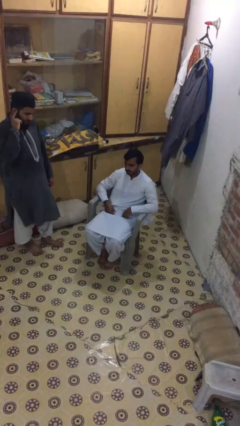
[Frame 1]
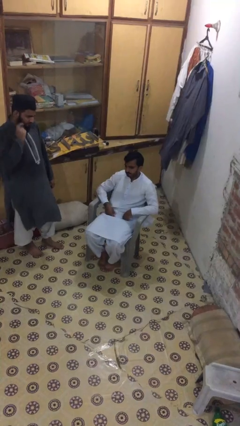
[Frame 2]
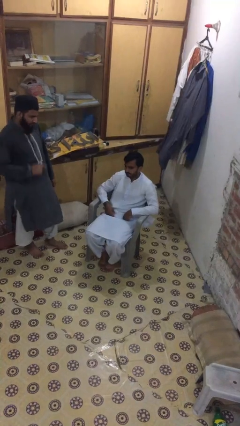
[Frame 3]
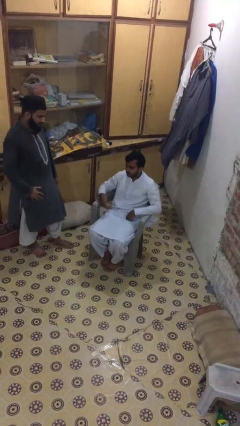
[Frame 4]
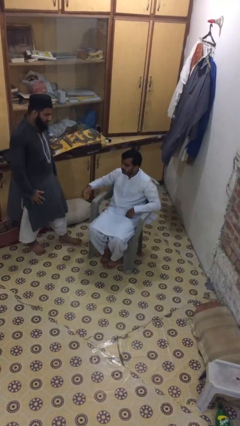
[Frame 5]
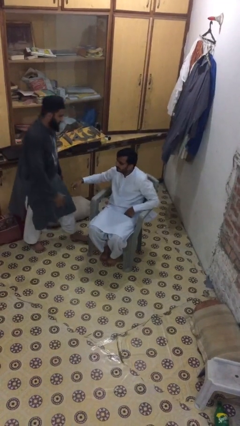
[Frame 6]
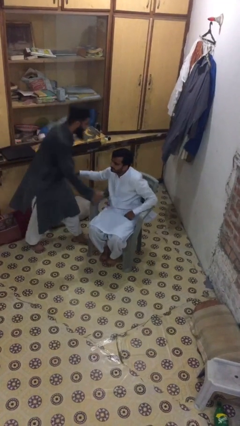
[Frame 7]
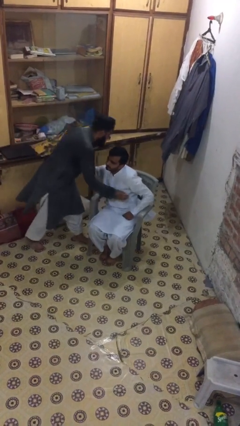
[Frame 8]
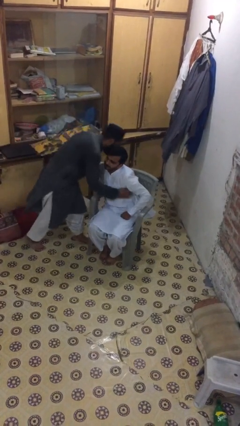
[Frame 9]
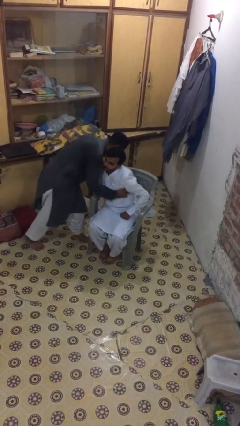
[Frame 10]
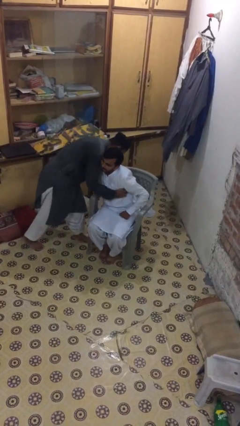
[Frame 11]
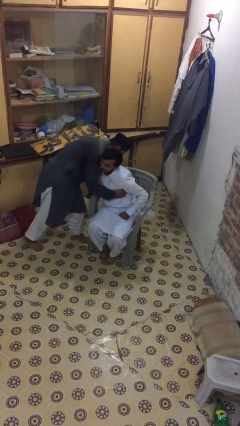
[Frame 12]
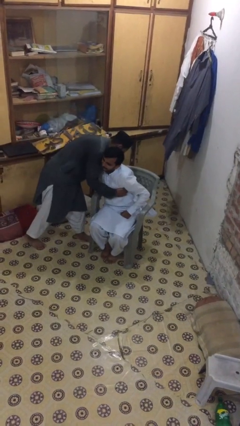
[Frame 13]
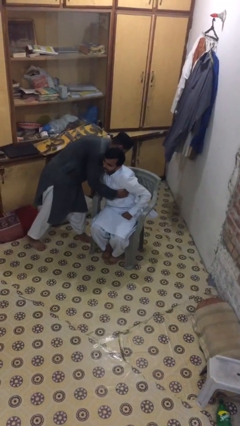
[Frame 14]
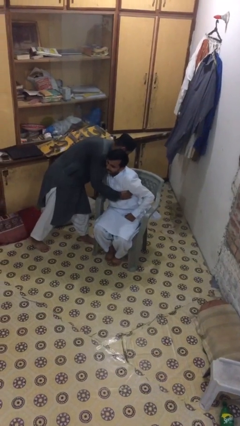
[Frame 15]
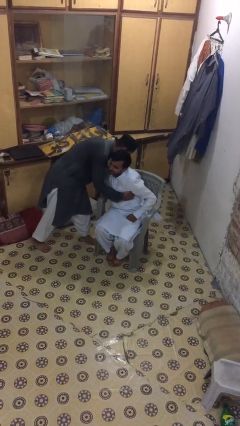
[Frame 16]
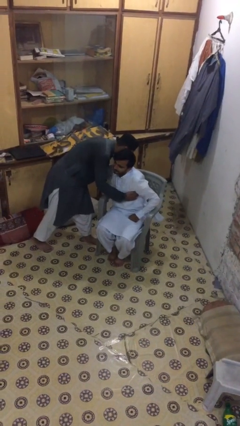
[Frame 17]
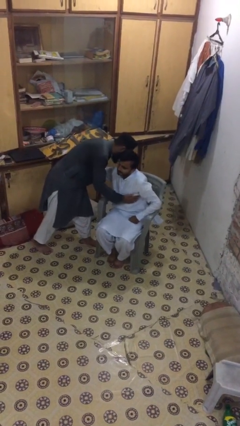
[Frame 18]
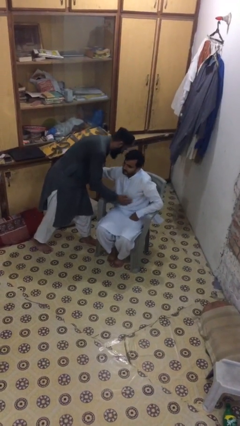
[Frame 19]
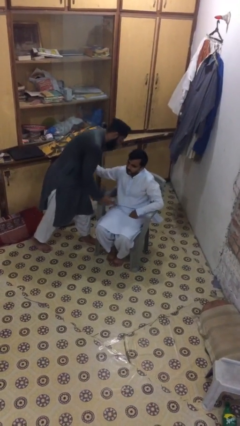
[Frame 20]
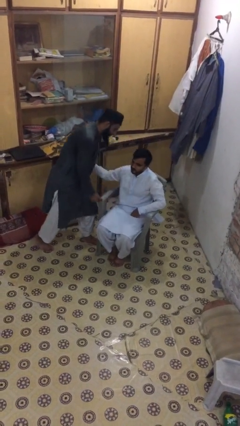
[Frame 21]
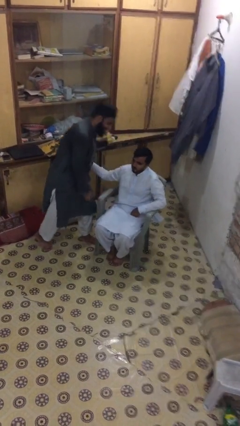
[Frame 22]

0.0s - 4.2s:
person embraces person

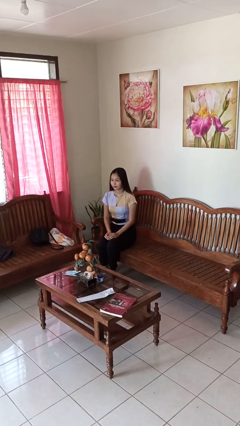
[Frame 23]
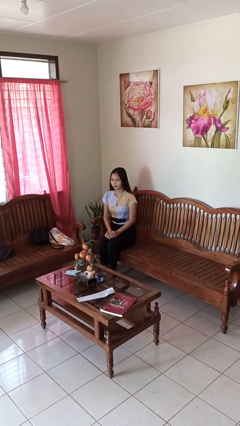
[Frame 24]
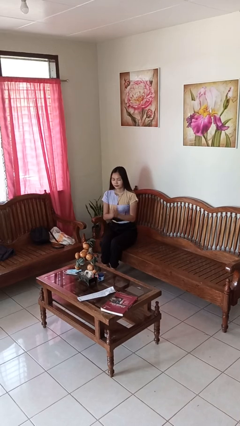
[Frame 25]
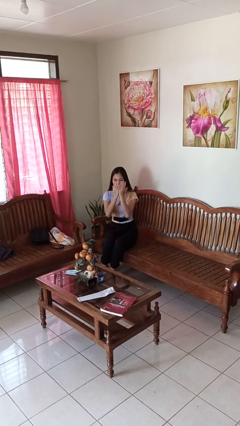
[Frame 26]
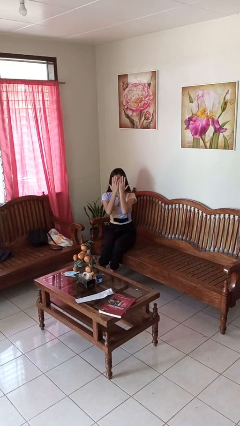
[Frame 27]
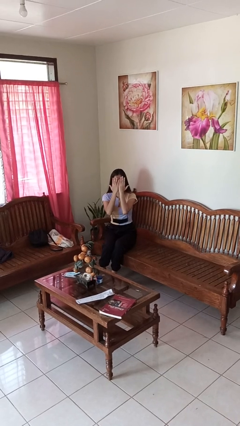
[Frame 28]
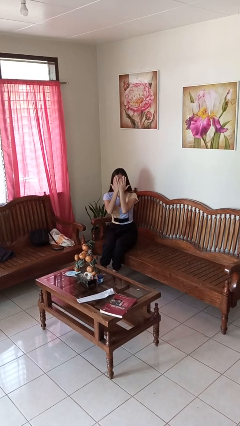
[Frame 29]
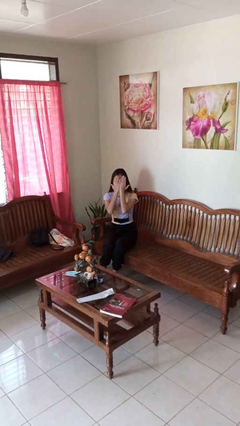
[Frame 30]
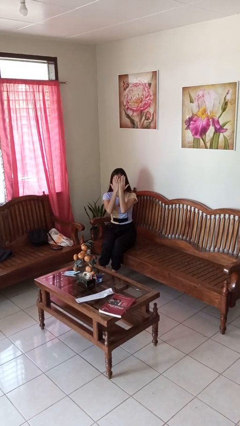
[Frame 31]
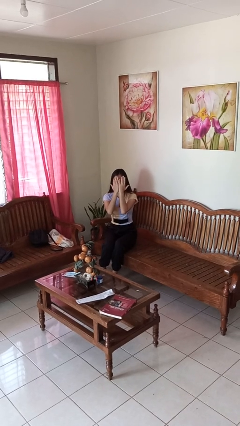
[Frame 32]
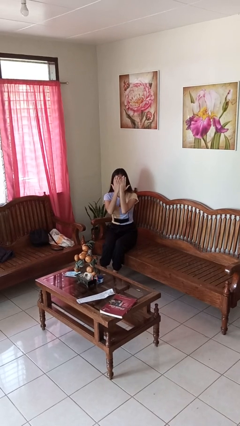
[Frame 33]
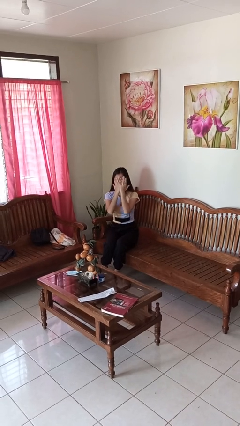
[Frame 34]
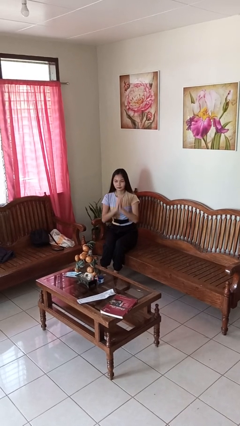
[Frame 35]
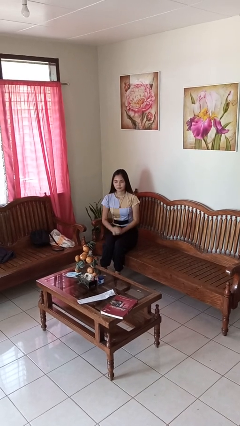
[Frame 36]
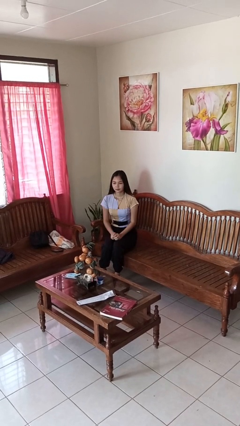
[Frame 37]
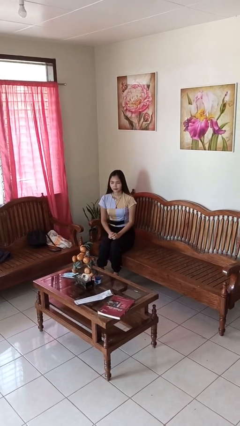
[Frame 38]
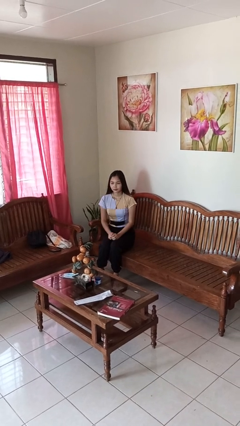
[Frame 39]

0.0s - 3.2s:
person covers face with hands

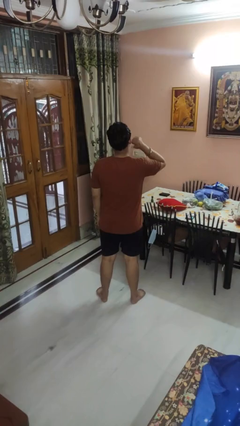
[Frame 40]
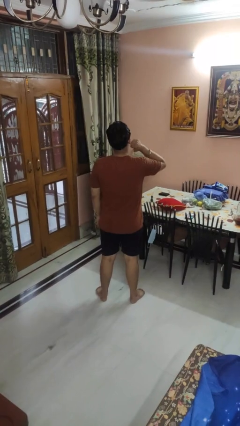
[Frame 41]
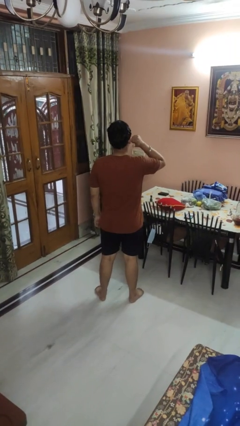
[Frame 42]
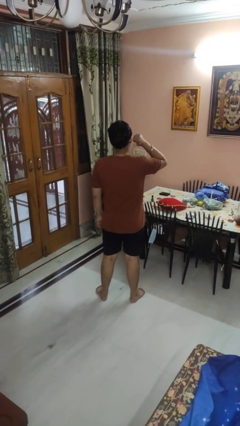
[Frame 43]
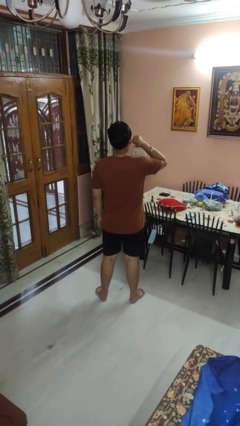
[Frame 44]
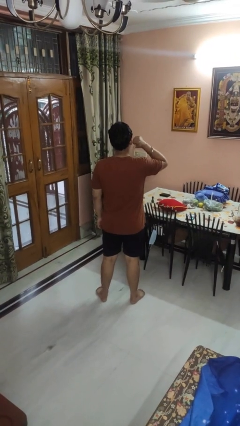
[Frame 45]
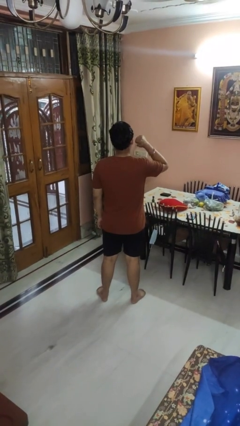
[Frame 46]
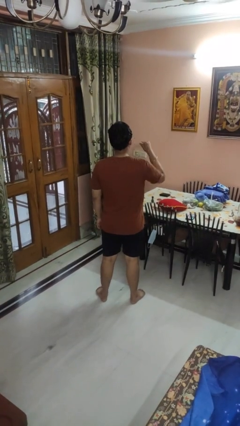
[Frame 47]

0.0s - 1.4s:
person gestures behind me

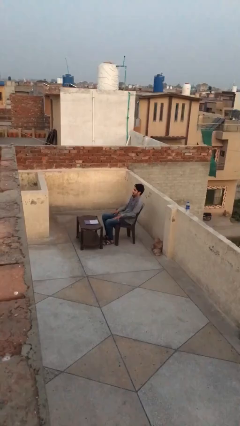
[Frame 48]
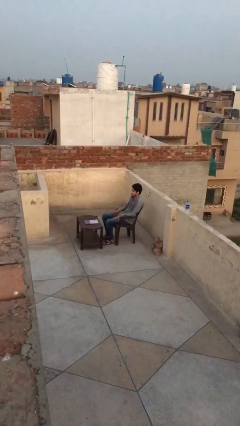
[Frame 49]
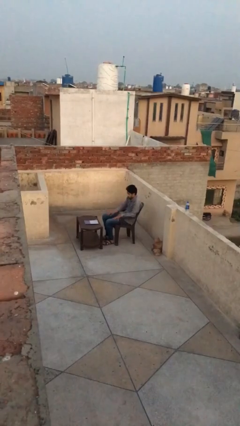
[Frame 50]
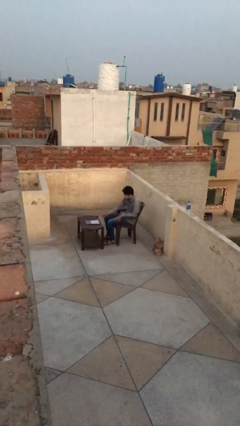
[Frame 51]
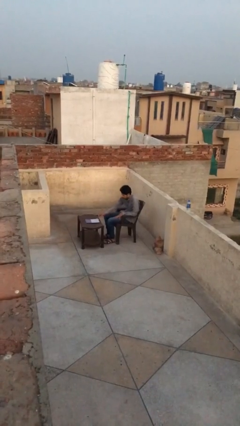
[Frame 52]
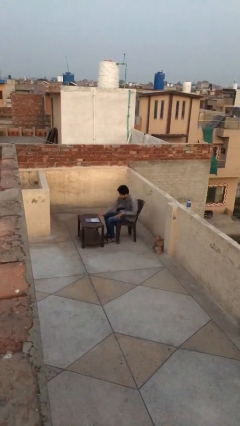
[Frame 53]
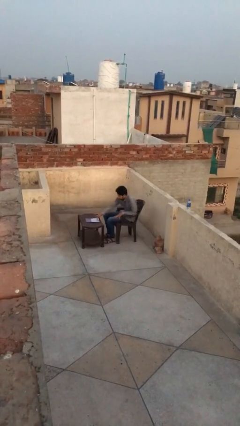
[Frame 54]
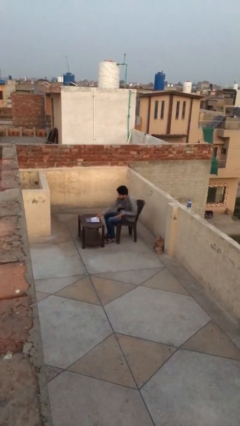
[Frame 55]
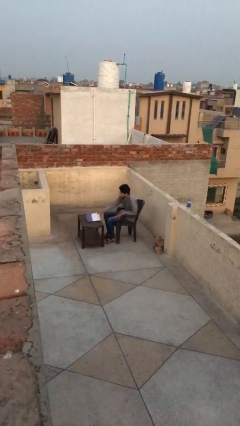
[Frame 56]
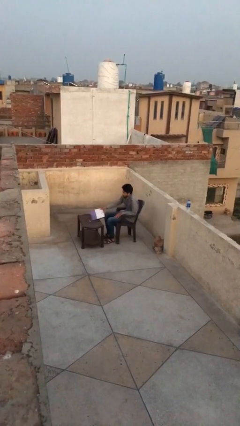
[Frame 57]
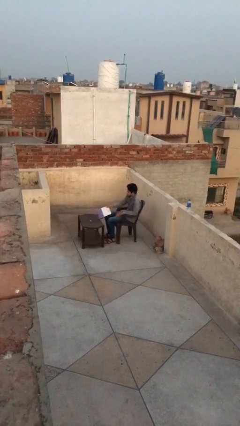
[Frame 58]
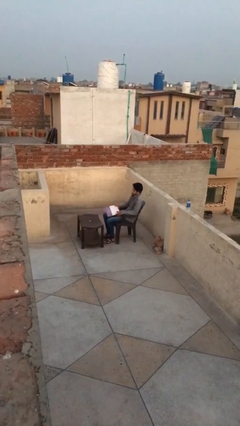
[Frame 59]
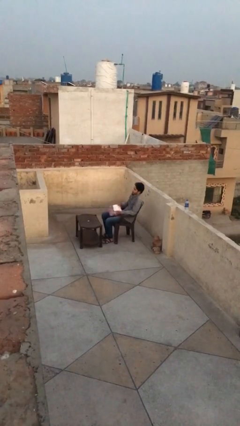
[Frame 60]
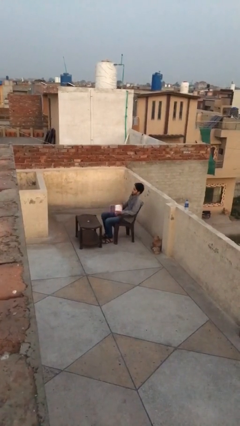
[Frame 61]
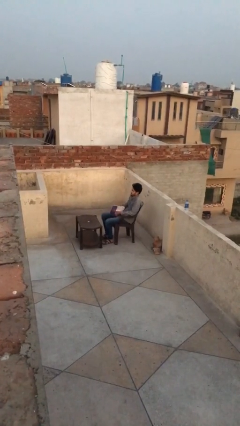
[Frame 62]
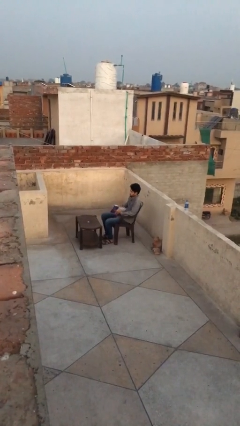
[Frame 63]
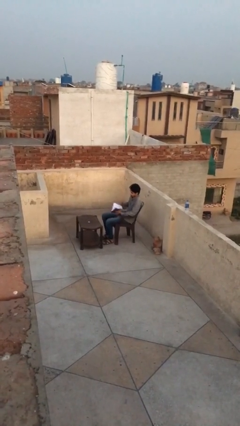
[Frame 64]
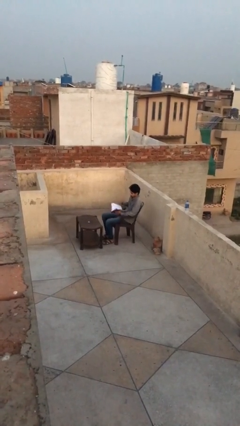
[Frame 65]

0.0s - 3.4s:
person picks up object from table

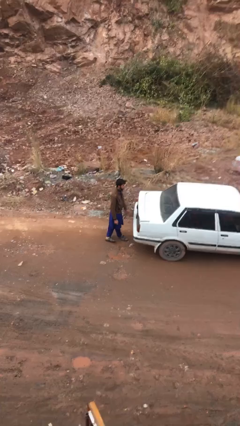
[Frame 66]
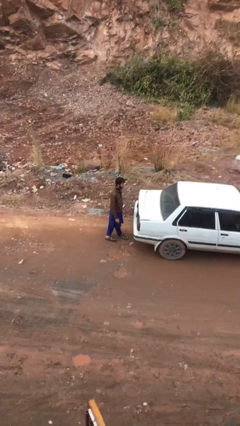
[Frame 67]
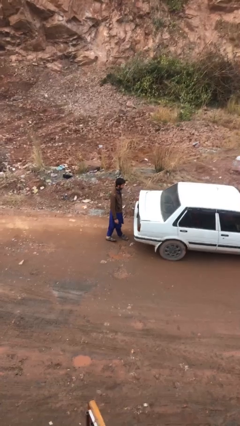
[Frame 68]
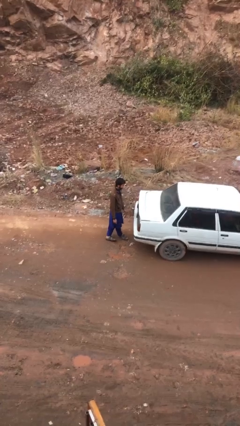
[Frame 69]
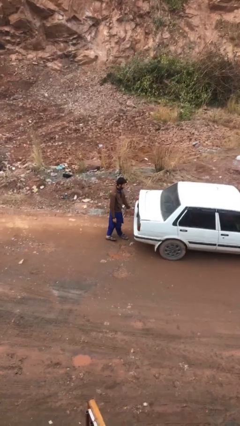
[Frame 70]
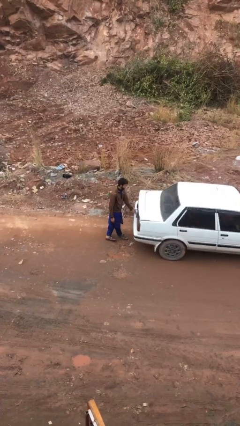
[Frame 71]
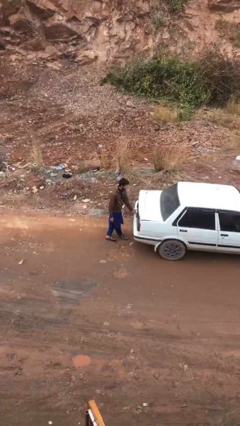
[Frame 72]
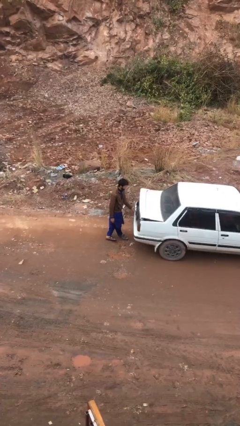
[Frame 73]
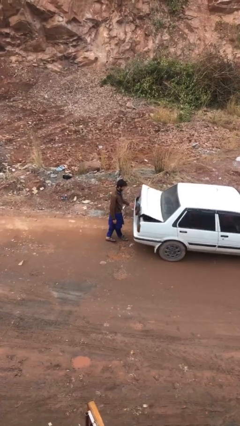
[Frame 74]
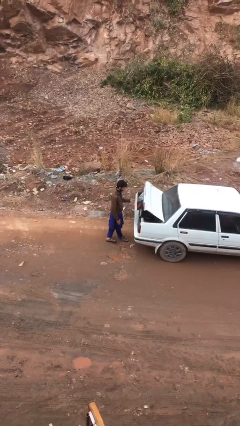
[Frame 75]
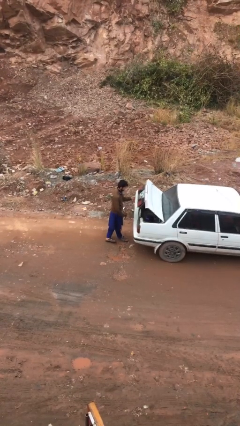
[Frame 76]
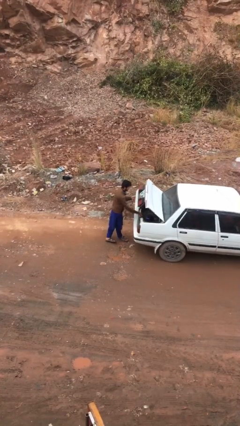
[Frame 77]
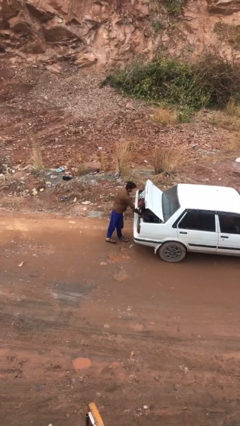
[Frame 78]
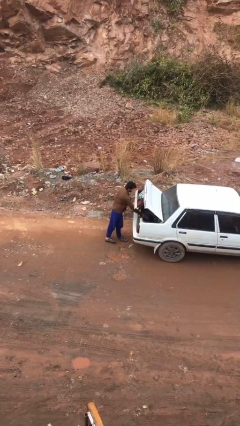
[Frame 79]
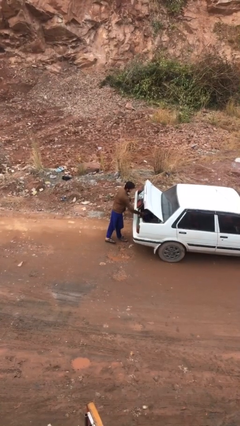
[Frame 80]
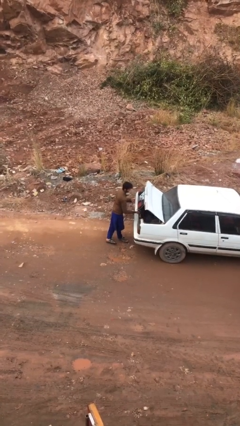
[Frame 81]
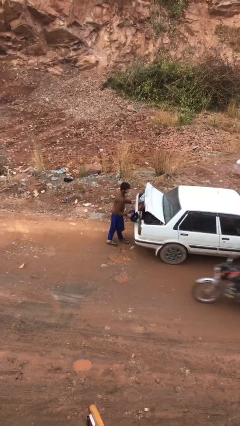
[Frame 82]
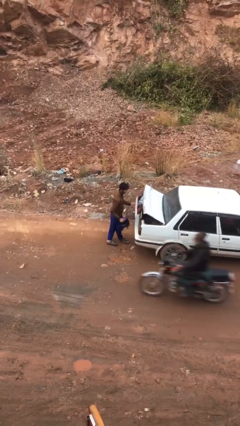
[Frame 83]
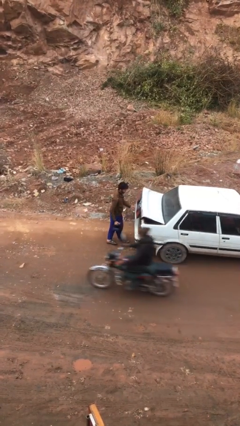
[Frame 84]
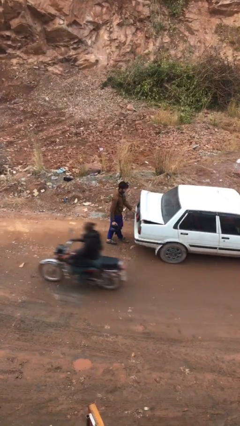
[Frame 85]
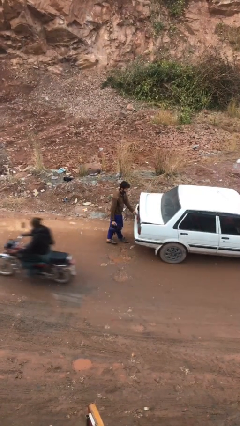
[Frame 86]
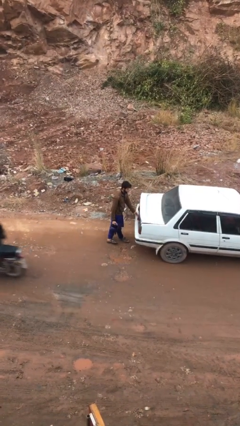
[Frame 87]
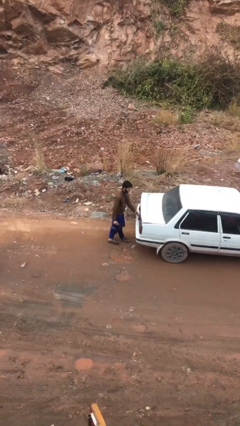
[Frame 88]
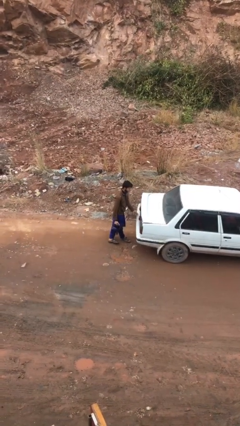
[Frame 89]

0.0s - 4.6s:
person unloads car

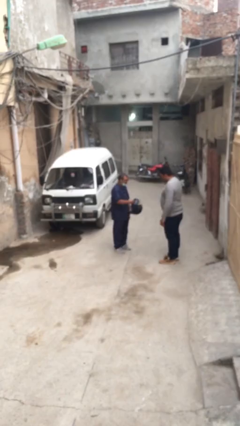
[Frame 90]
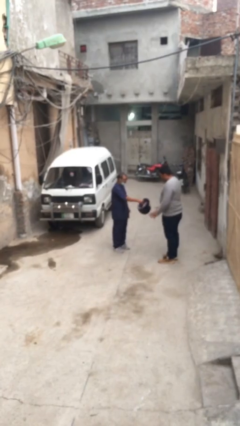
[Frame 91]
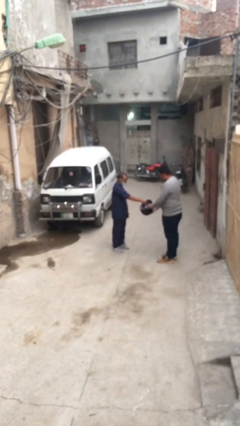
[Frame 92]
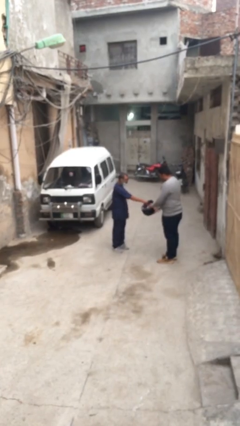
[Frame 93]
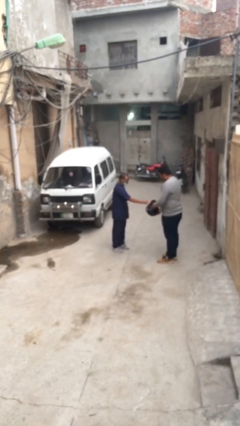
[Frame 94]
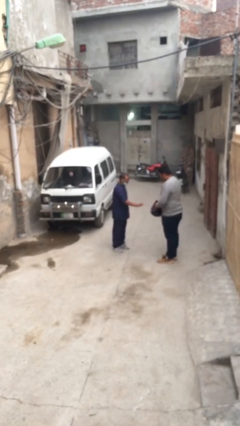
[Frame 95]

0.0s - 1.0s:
person transfers object to person
